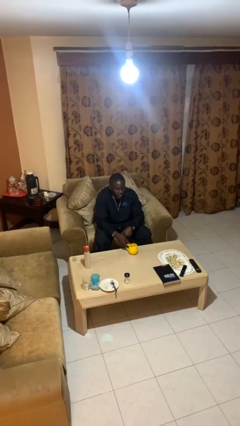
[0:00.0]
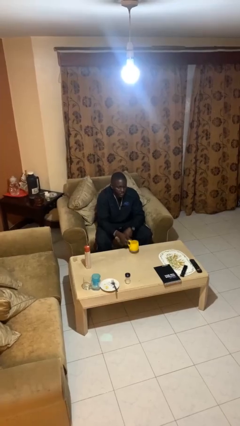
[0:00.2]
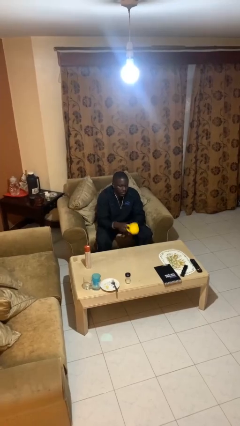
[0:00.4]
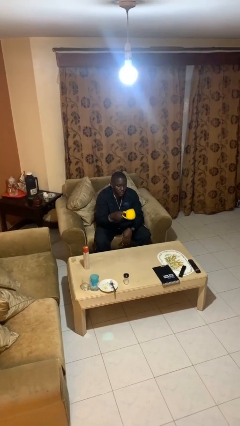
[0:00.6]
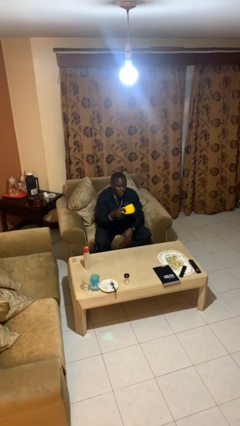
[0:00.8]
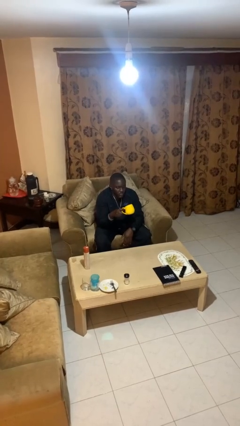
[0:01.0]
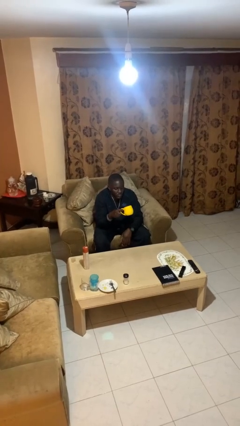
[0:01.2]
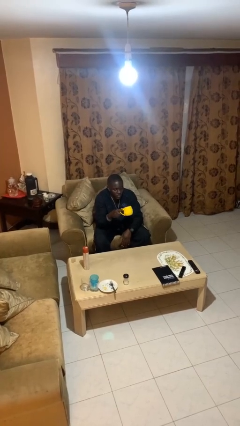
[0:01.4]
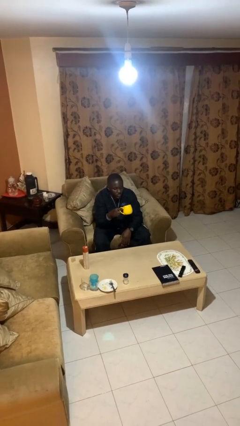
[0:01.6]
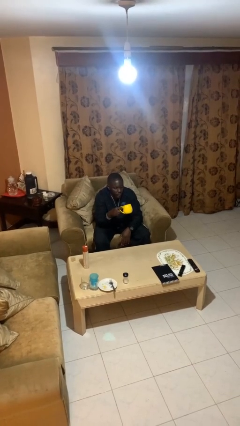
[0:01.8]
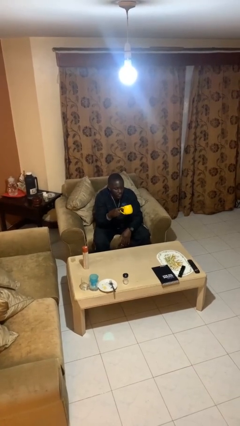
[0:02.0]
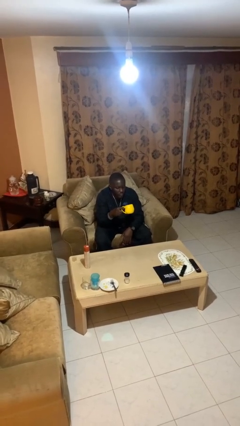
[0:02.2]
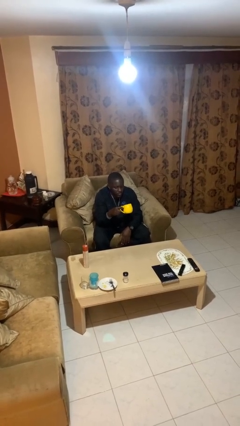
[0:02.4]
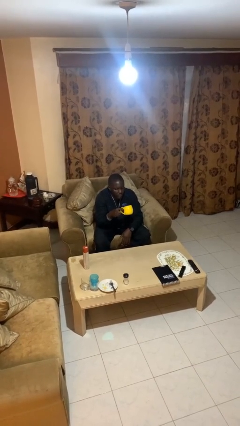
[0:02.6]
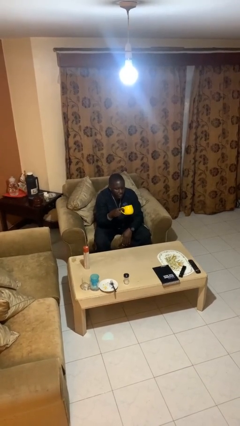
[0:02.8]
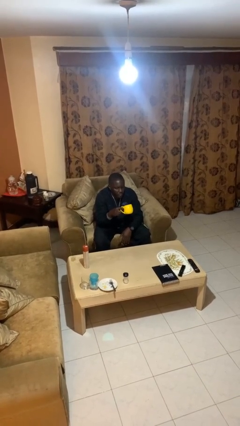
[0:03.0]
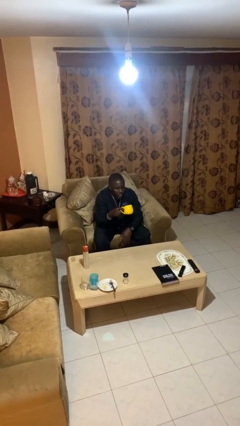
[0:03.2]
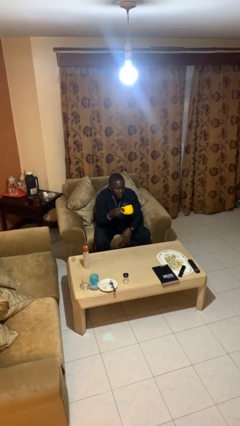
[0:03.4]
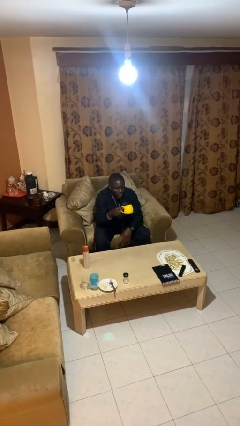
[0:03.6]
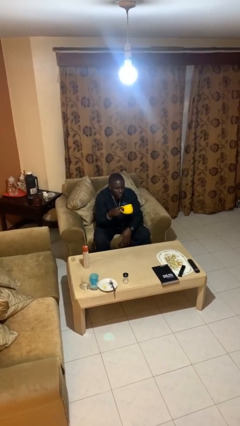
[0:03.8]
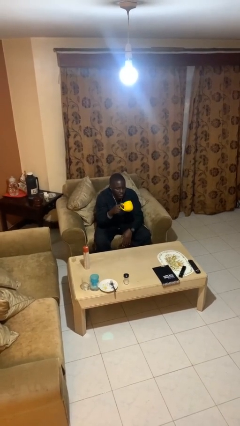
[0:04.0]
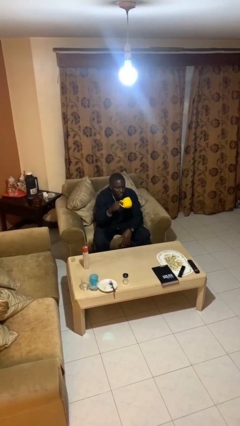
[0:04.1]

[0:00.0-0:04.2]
person picks up object from table

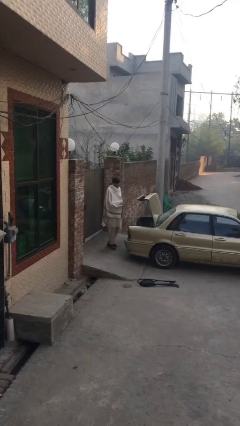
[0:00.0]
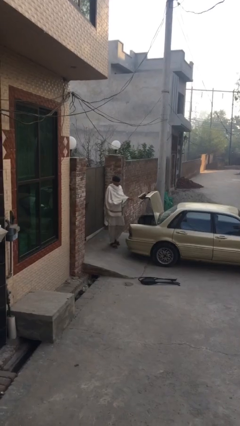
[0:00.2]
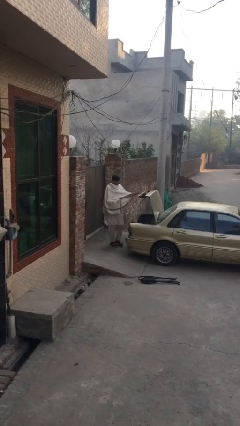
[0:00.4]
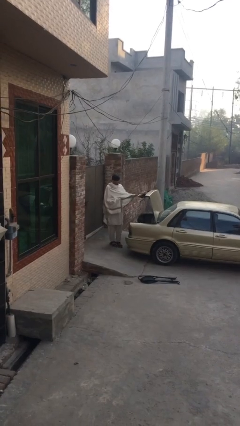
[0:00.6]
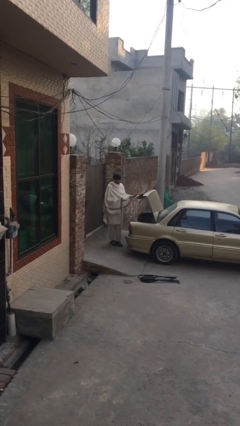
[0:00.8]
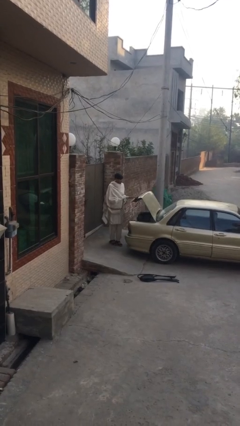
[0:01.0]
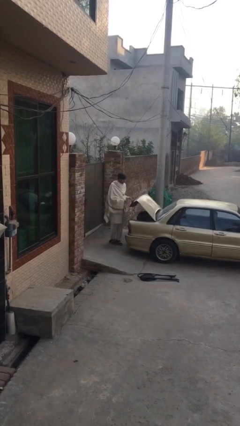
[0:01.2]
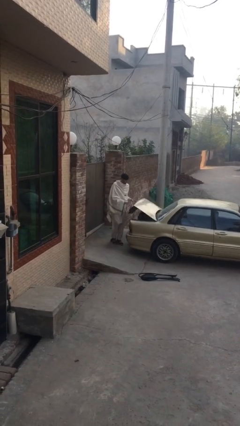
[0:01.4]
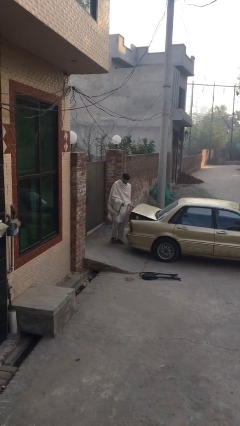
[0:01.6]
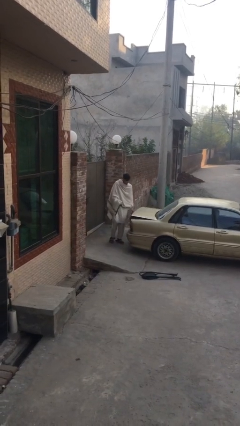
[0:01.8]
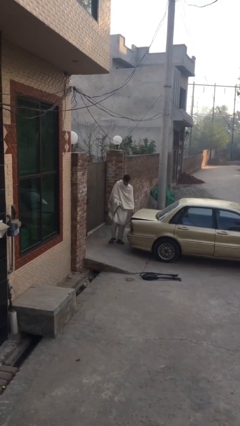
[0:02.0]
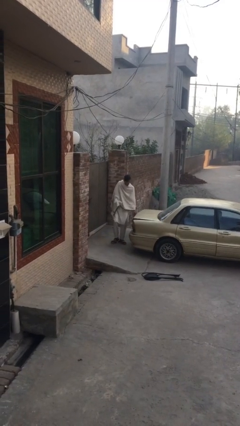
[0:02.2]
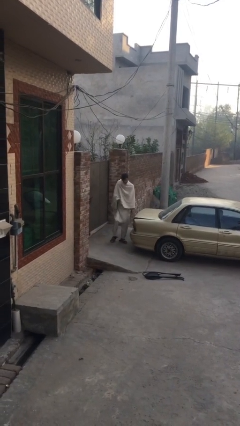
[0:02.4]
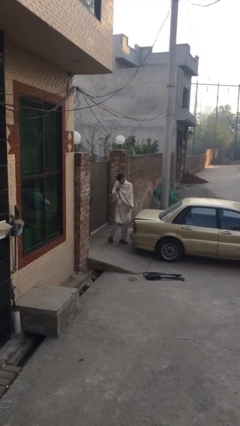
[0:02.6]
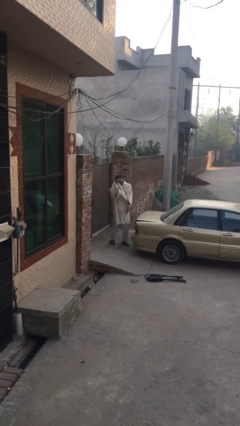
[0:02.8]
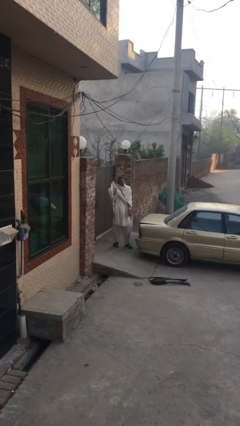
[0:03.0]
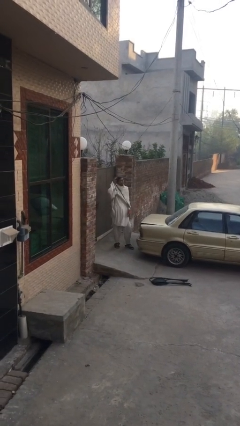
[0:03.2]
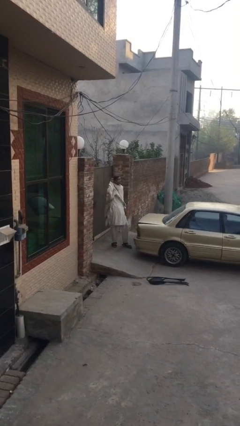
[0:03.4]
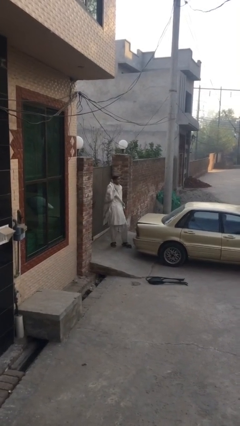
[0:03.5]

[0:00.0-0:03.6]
person closes car trunk

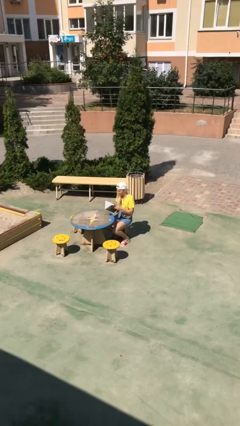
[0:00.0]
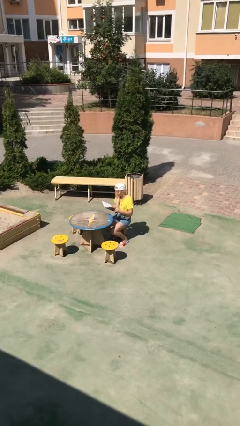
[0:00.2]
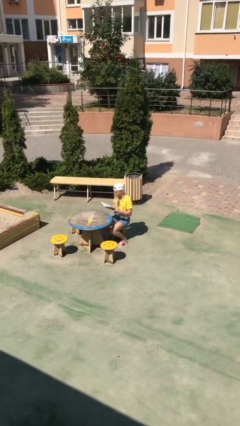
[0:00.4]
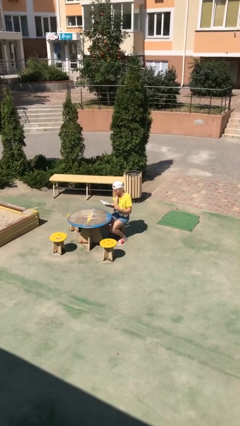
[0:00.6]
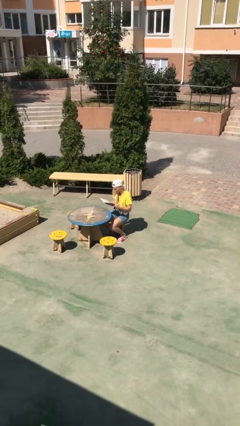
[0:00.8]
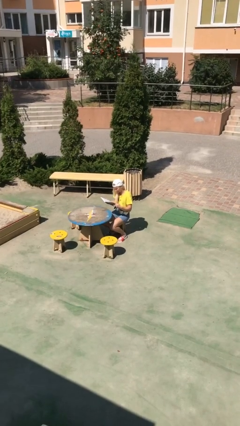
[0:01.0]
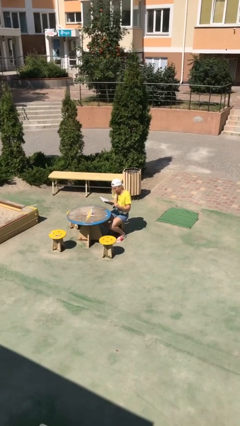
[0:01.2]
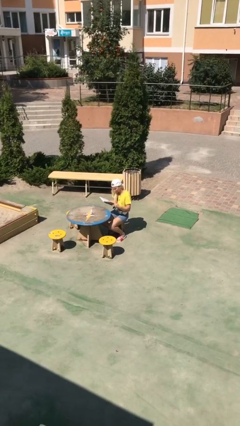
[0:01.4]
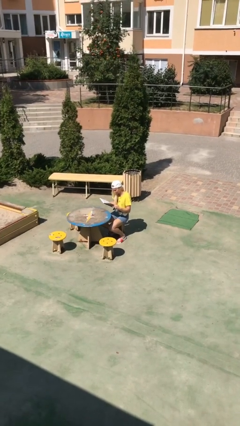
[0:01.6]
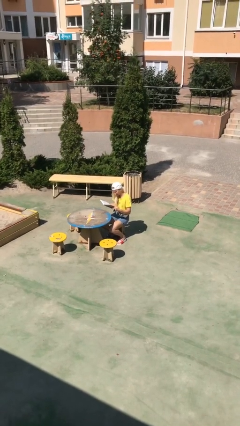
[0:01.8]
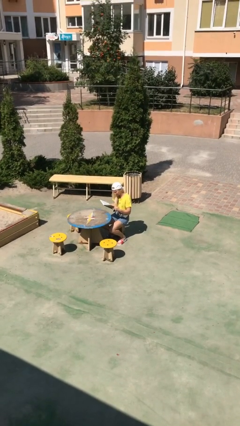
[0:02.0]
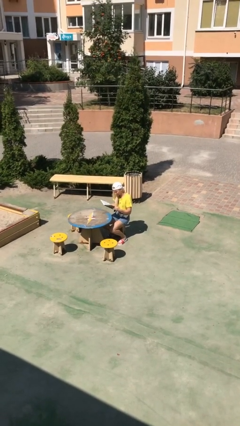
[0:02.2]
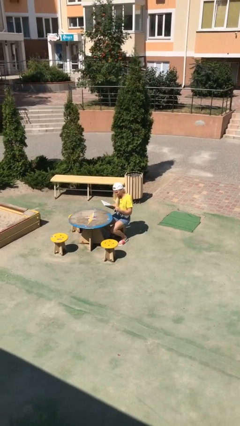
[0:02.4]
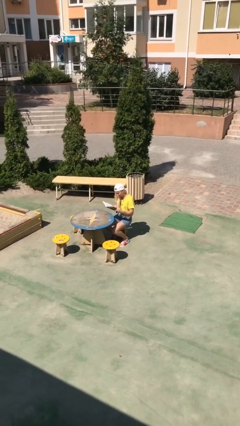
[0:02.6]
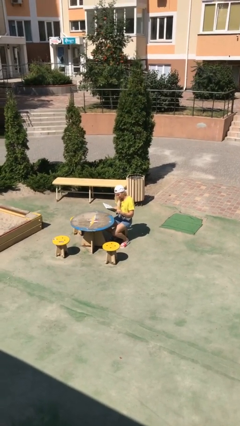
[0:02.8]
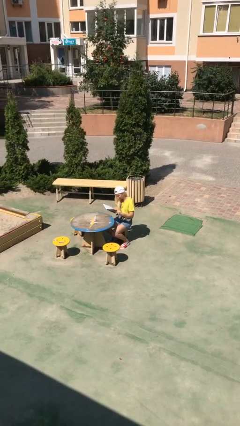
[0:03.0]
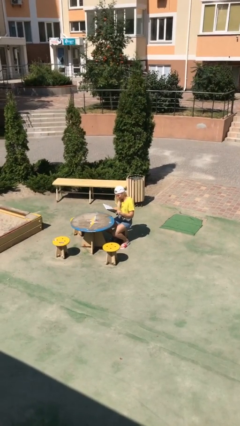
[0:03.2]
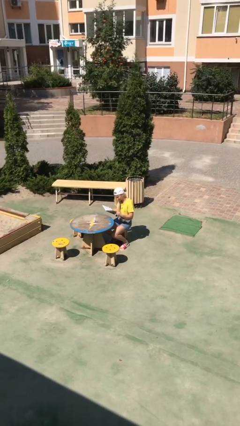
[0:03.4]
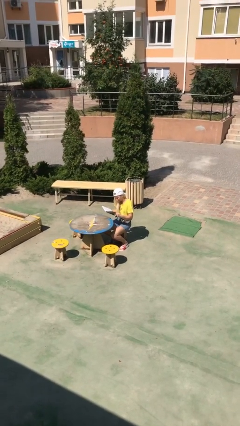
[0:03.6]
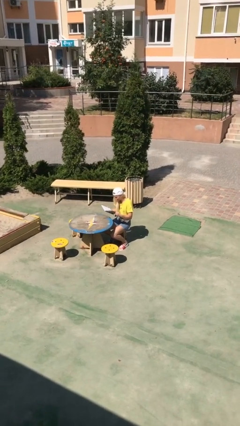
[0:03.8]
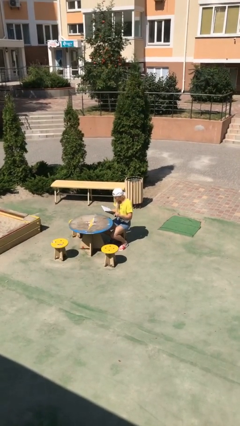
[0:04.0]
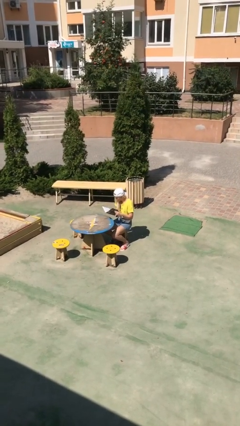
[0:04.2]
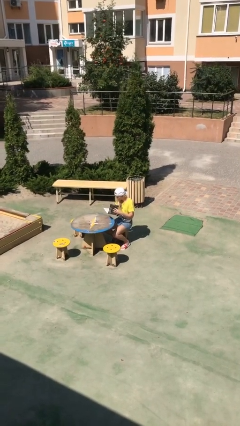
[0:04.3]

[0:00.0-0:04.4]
person reads document

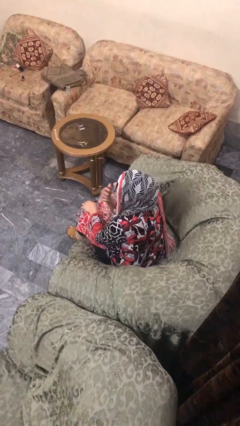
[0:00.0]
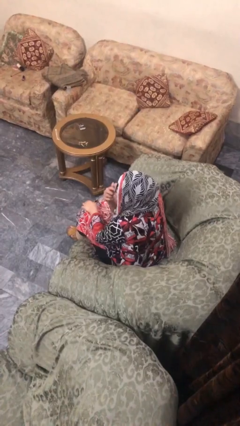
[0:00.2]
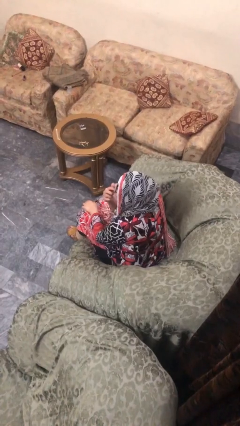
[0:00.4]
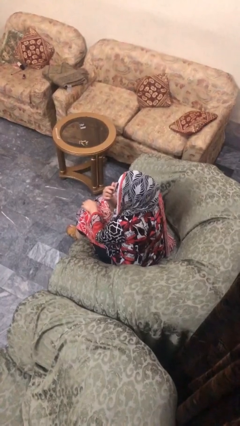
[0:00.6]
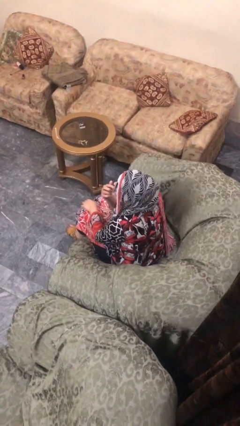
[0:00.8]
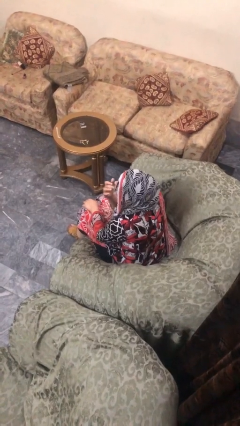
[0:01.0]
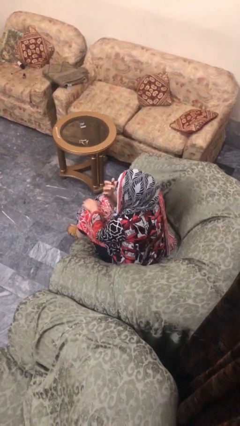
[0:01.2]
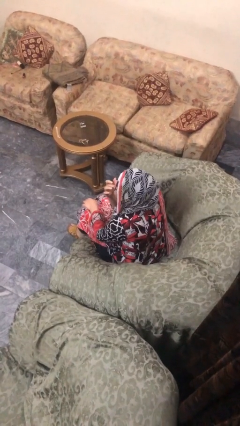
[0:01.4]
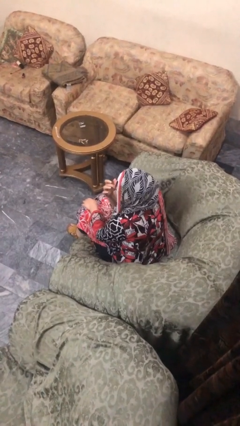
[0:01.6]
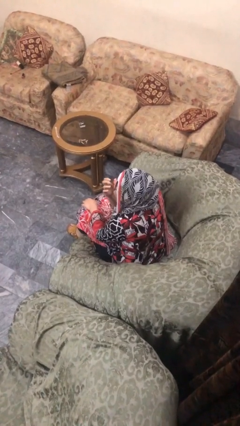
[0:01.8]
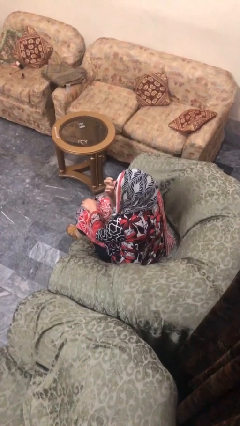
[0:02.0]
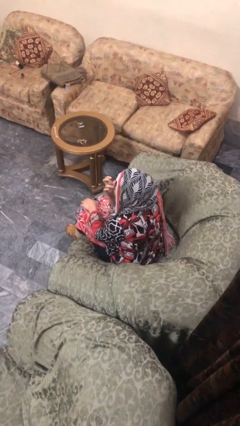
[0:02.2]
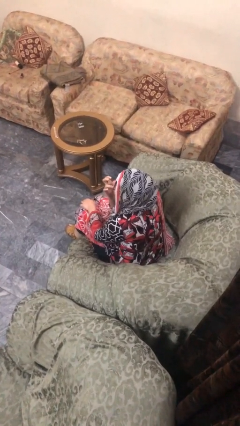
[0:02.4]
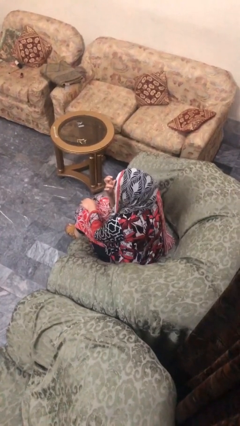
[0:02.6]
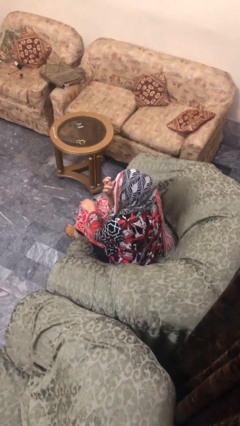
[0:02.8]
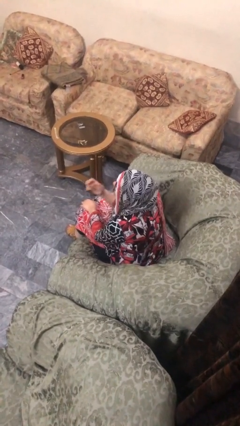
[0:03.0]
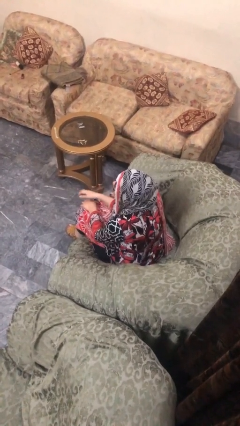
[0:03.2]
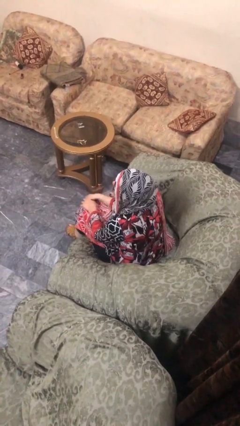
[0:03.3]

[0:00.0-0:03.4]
person licks fingers

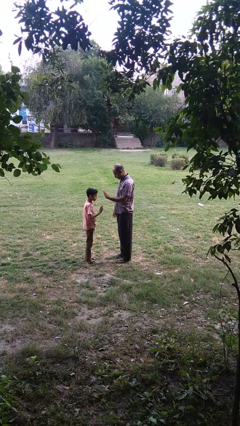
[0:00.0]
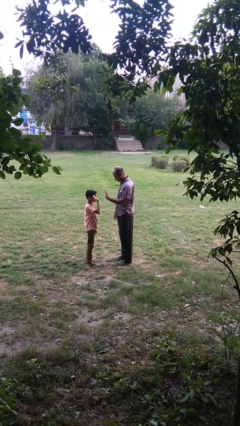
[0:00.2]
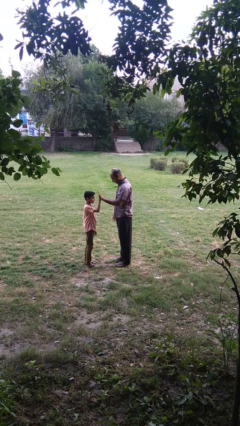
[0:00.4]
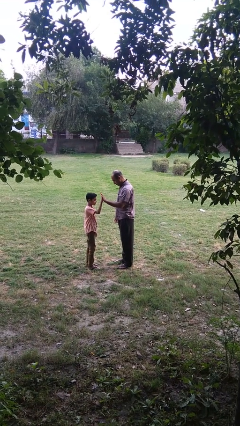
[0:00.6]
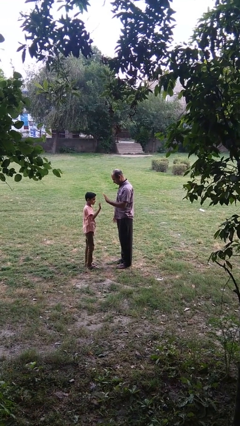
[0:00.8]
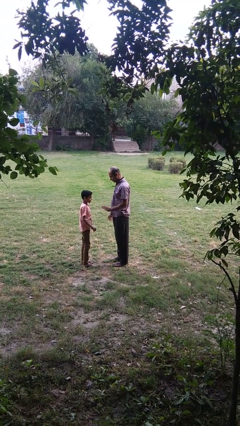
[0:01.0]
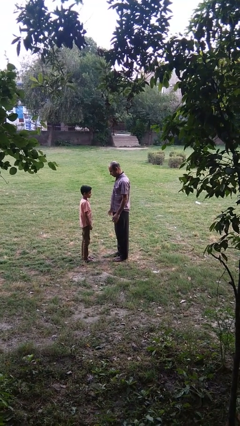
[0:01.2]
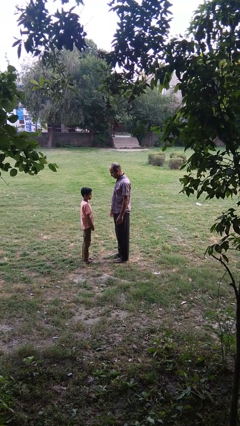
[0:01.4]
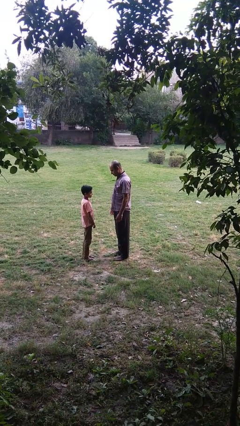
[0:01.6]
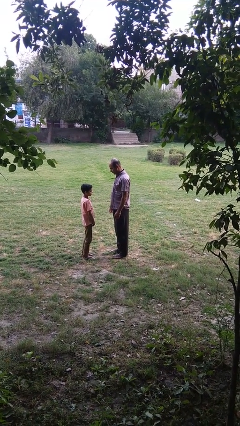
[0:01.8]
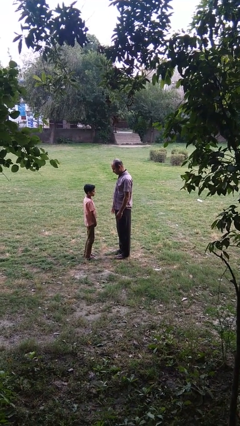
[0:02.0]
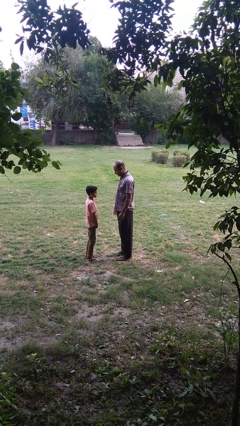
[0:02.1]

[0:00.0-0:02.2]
person highfives hand
